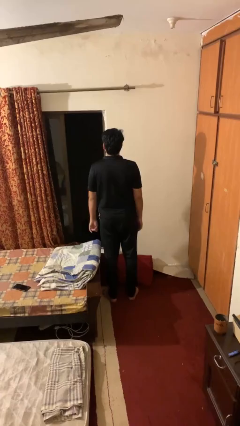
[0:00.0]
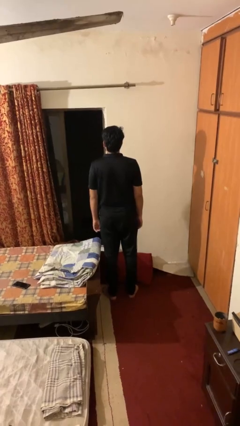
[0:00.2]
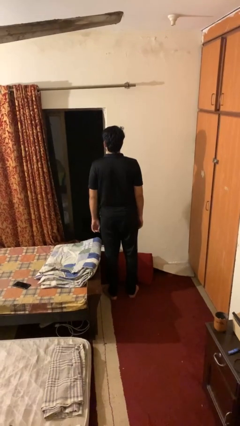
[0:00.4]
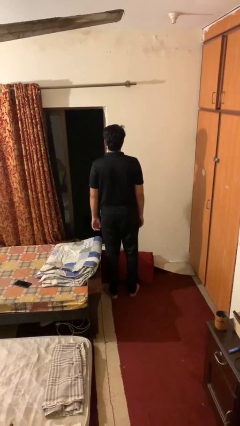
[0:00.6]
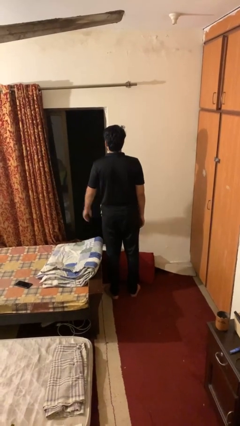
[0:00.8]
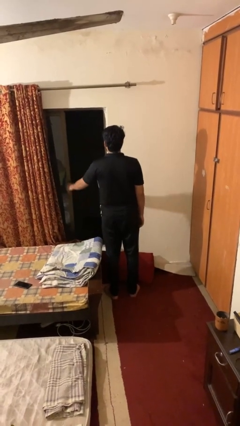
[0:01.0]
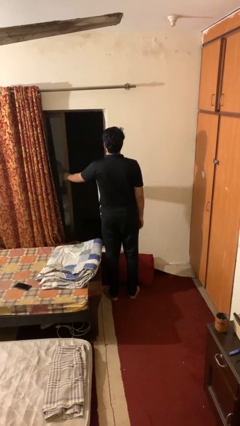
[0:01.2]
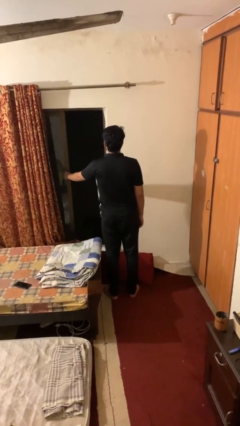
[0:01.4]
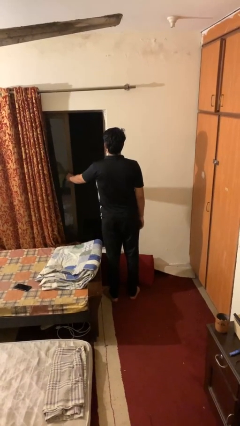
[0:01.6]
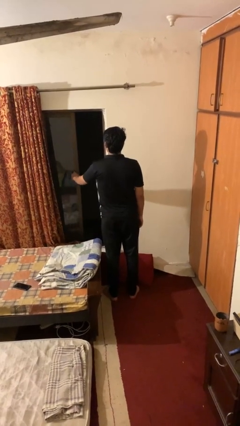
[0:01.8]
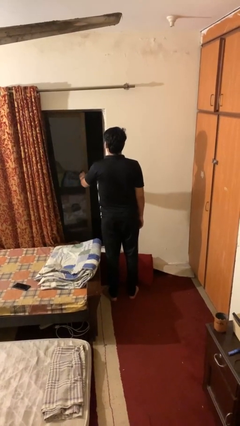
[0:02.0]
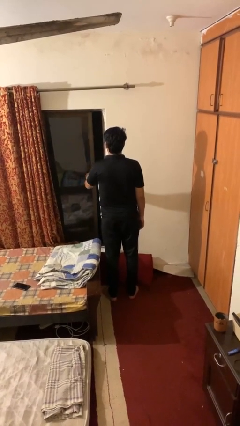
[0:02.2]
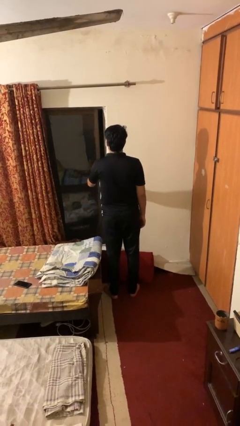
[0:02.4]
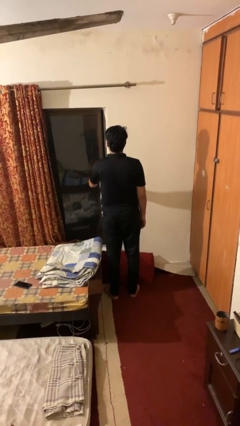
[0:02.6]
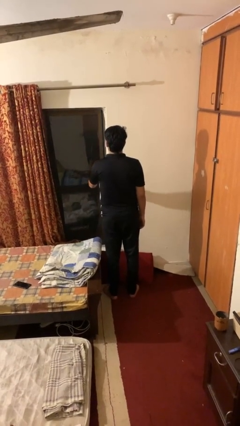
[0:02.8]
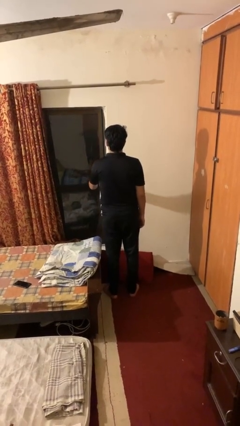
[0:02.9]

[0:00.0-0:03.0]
person closes home window

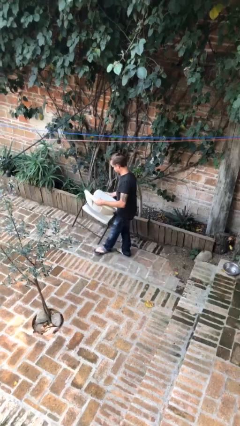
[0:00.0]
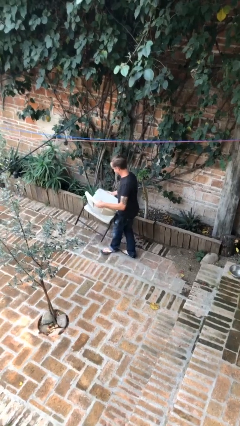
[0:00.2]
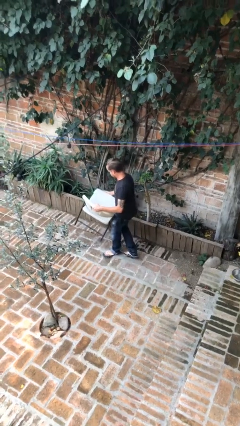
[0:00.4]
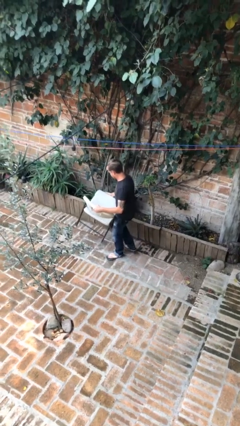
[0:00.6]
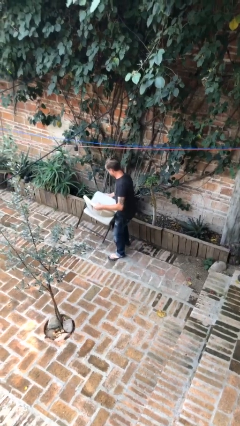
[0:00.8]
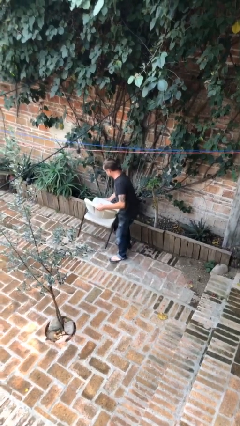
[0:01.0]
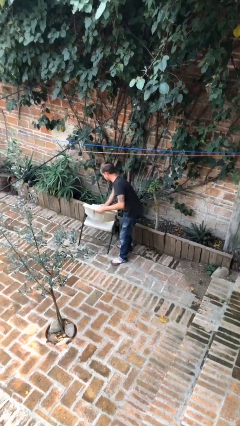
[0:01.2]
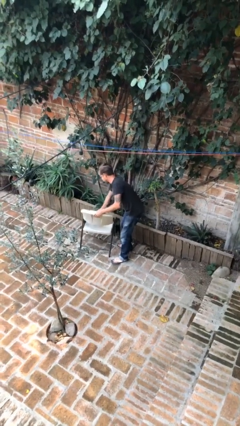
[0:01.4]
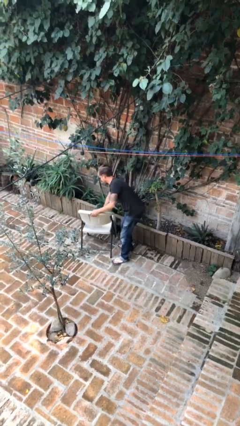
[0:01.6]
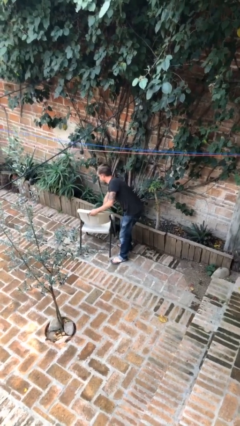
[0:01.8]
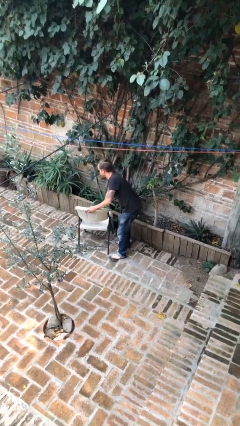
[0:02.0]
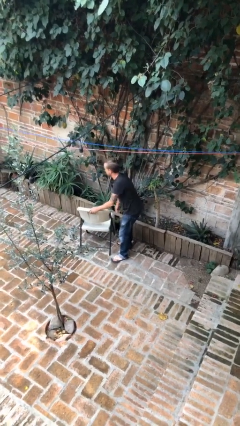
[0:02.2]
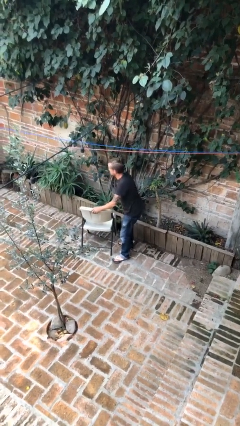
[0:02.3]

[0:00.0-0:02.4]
person puts down object on floor

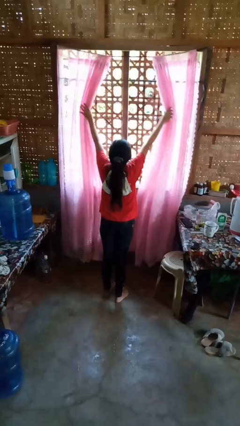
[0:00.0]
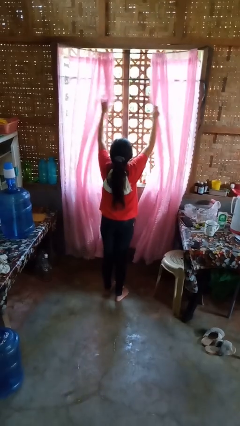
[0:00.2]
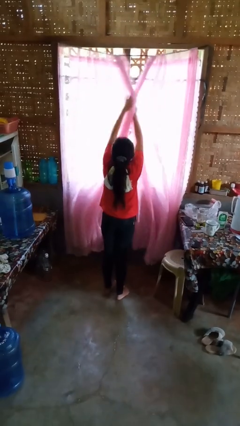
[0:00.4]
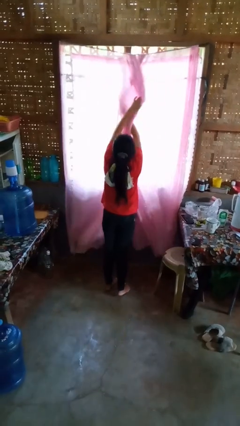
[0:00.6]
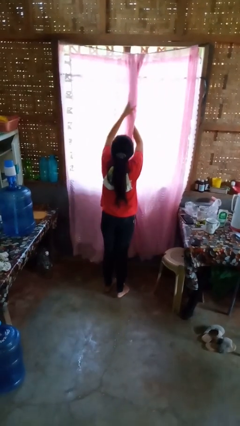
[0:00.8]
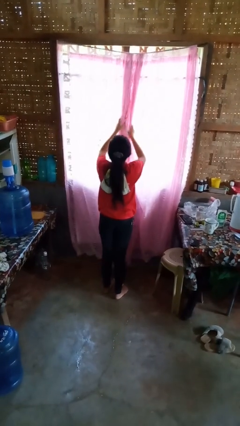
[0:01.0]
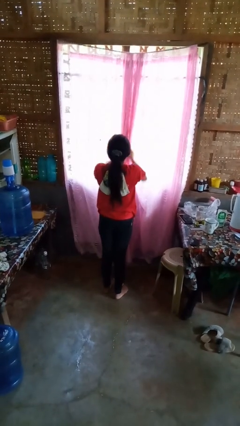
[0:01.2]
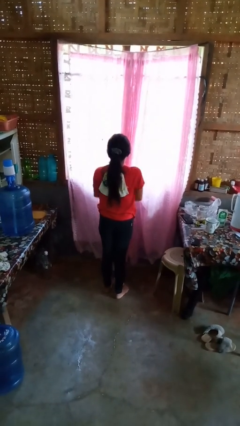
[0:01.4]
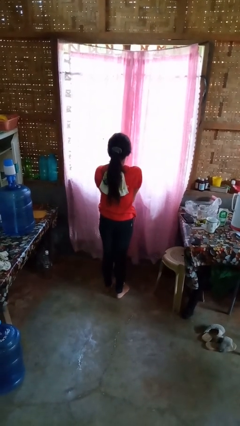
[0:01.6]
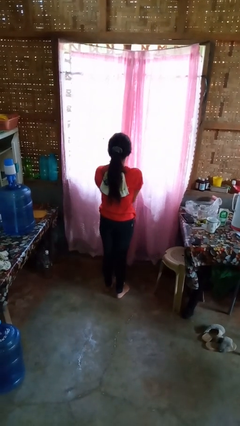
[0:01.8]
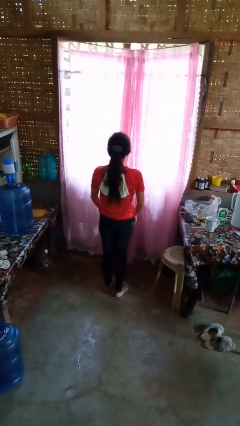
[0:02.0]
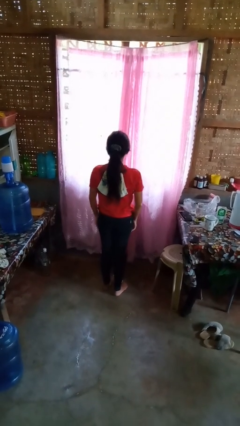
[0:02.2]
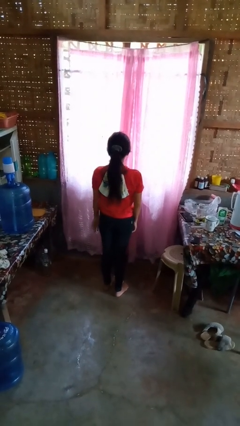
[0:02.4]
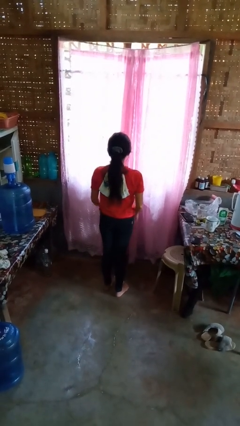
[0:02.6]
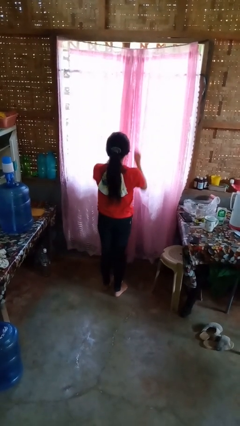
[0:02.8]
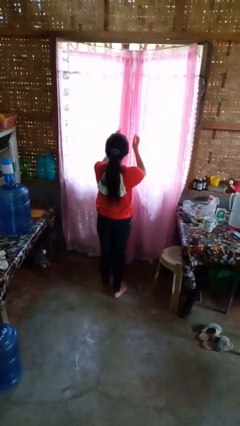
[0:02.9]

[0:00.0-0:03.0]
person closes curtains

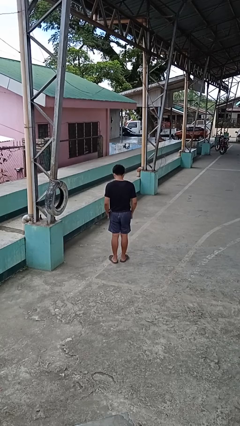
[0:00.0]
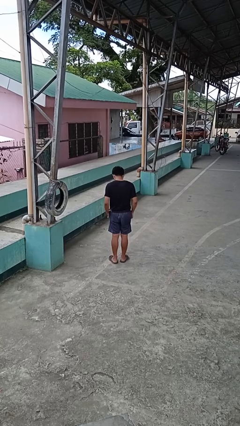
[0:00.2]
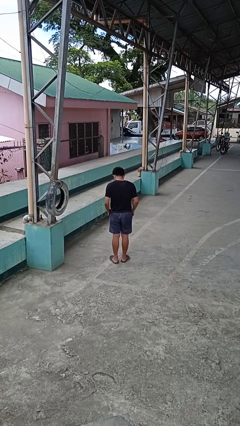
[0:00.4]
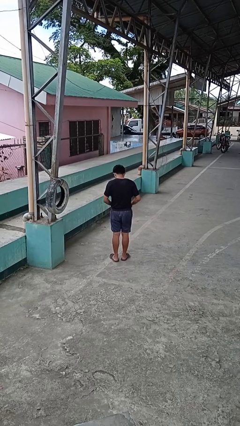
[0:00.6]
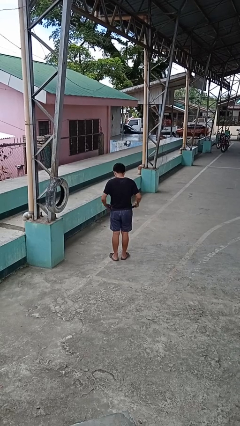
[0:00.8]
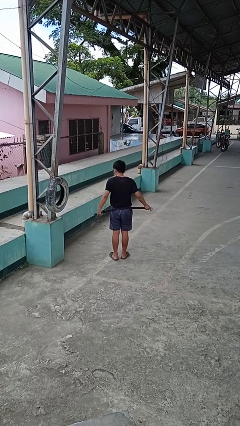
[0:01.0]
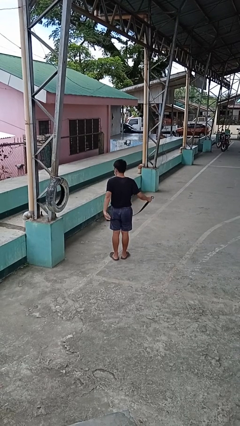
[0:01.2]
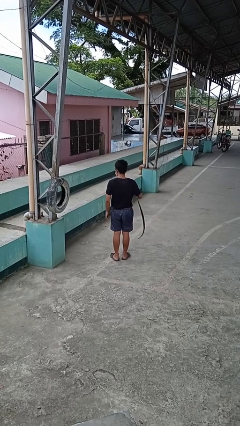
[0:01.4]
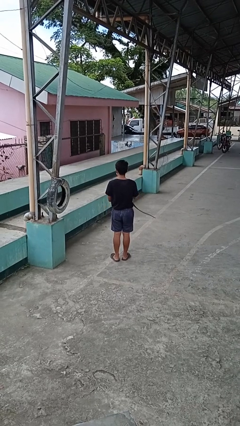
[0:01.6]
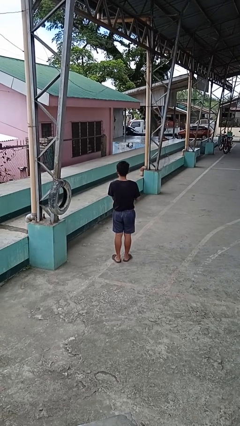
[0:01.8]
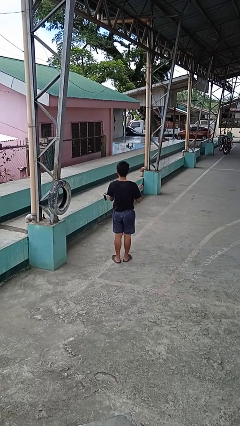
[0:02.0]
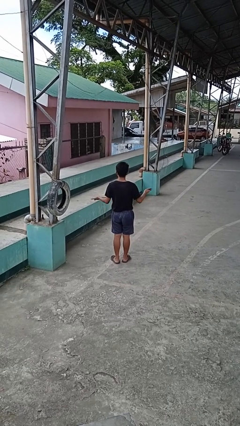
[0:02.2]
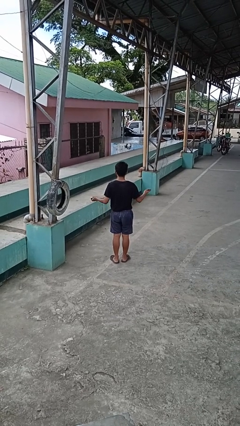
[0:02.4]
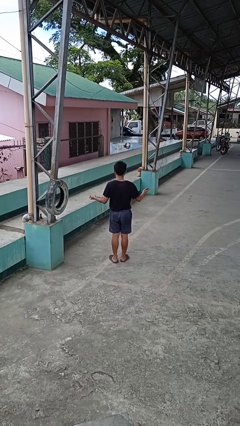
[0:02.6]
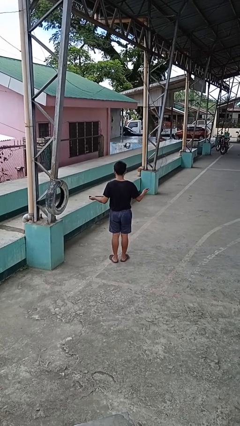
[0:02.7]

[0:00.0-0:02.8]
person takes off belt

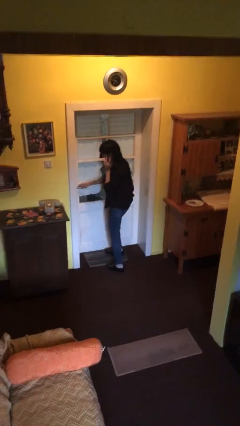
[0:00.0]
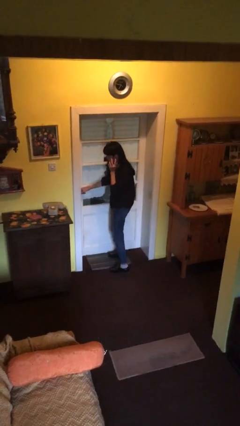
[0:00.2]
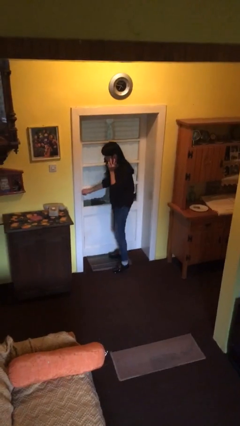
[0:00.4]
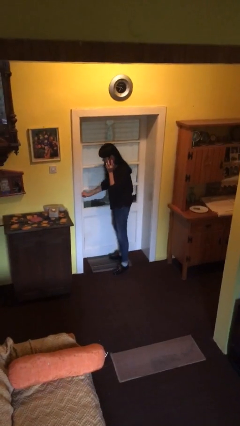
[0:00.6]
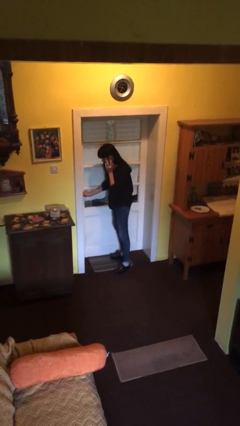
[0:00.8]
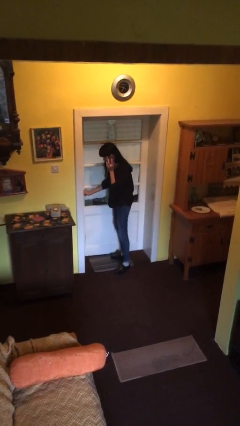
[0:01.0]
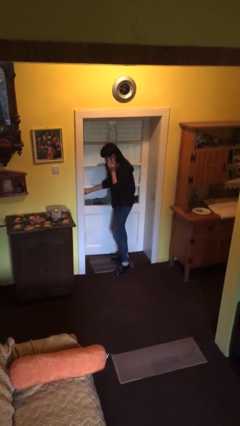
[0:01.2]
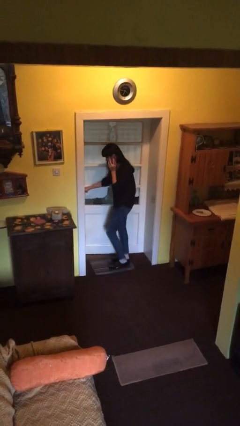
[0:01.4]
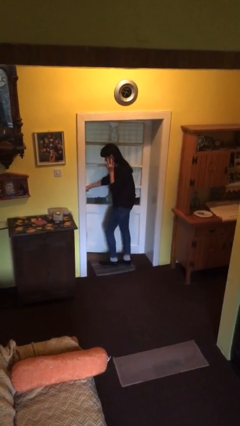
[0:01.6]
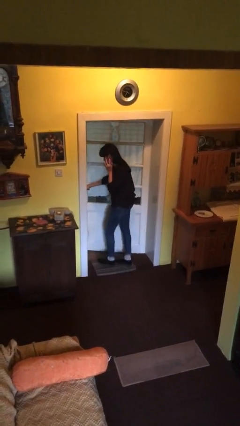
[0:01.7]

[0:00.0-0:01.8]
person opens facility door

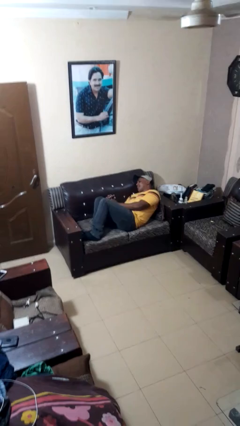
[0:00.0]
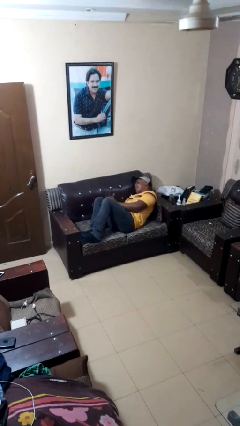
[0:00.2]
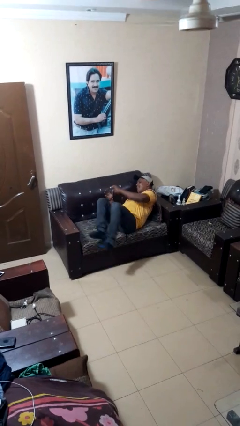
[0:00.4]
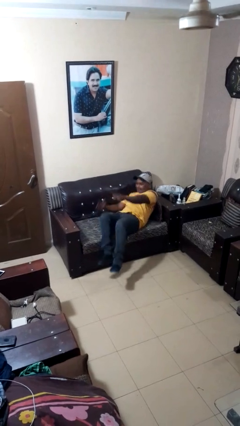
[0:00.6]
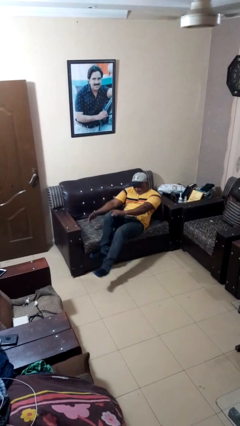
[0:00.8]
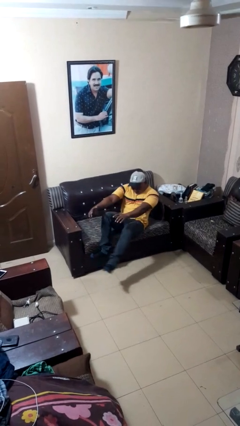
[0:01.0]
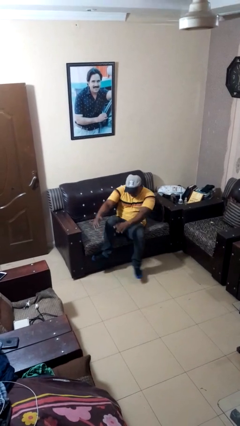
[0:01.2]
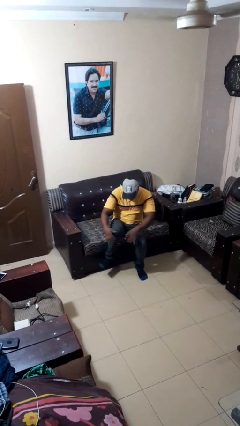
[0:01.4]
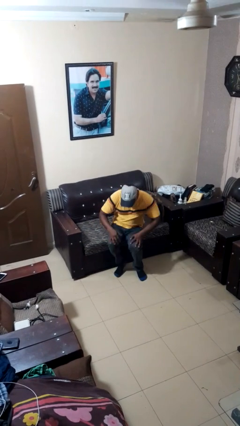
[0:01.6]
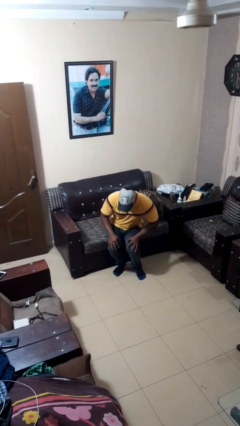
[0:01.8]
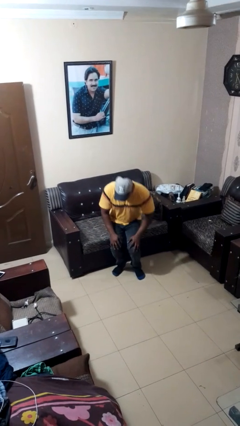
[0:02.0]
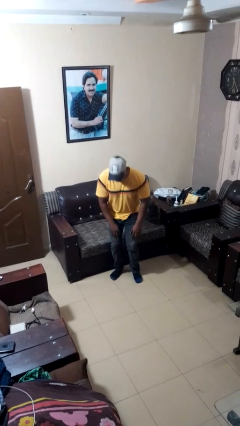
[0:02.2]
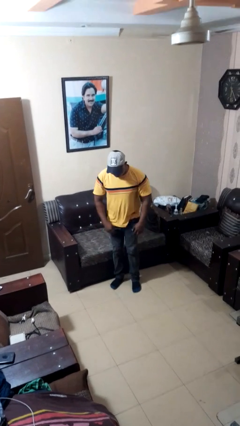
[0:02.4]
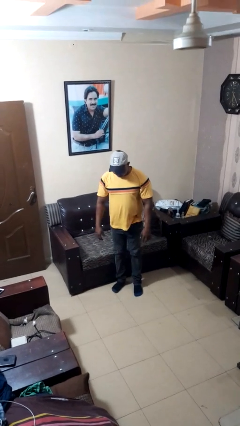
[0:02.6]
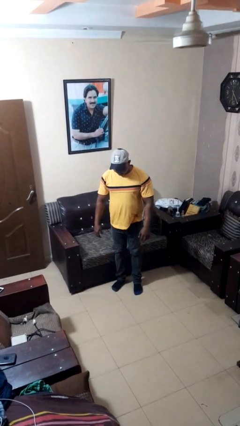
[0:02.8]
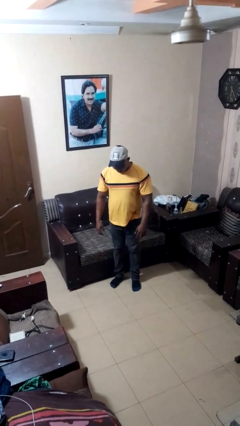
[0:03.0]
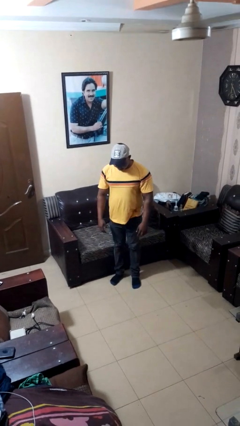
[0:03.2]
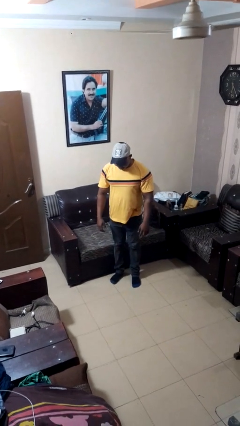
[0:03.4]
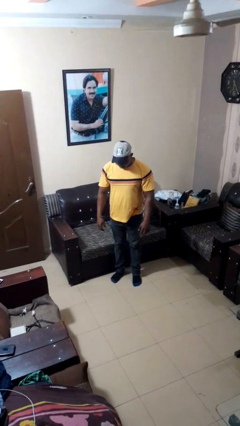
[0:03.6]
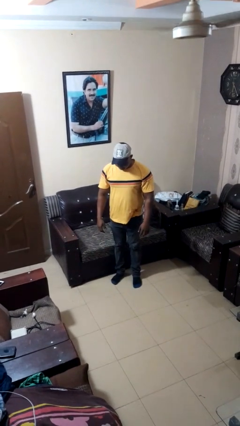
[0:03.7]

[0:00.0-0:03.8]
person stands up

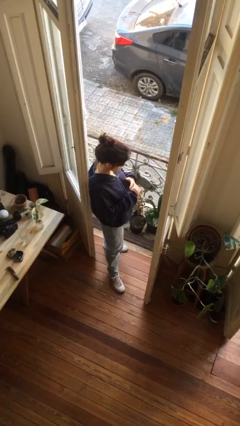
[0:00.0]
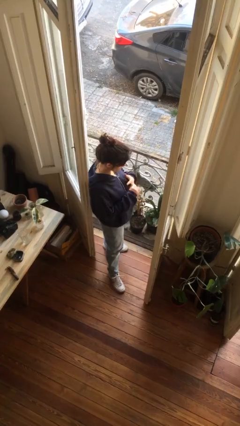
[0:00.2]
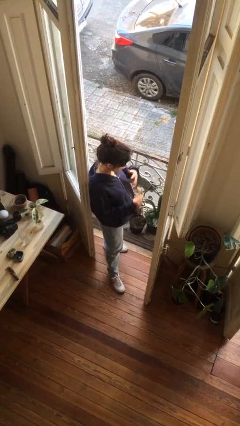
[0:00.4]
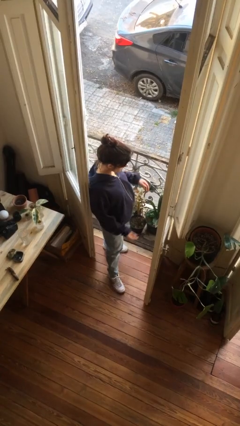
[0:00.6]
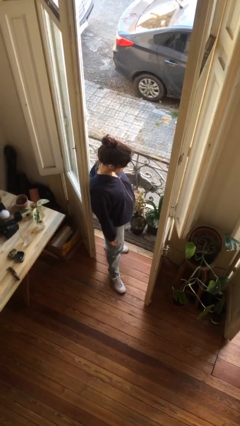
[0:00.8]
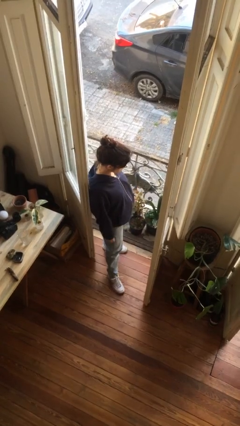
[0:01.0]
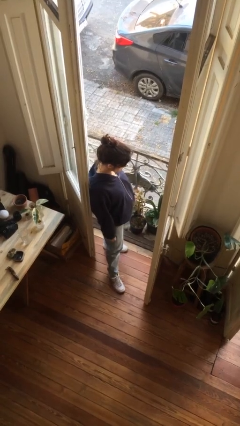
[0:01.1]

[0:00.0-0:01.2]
person takes off ring
